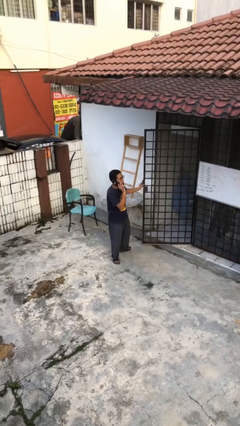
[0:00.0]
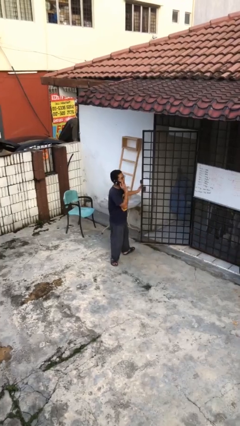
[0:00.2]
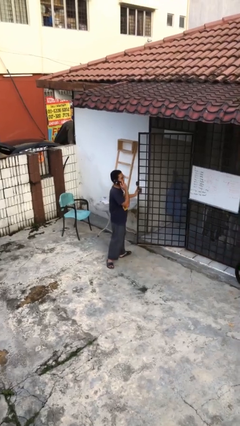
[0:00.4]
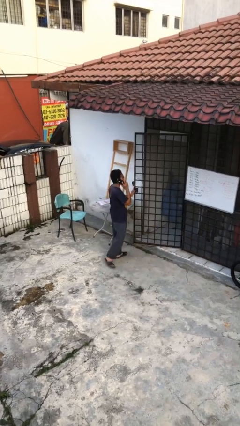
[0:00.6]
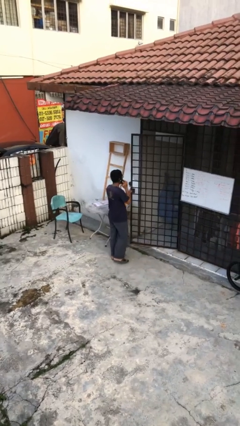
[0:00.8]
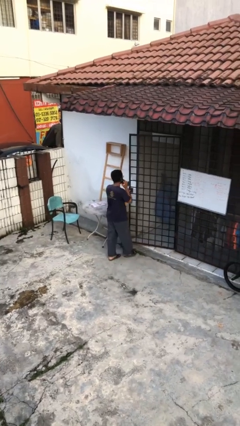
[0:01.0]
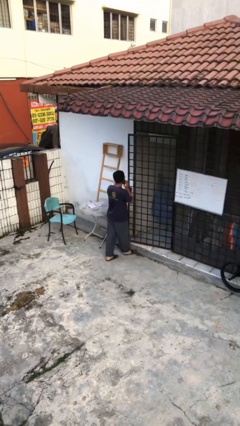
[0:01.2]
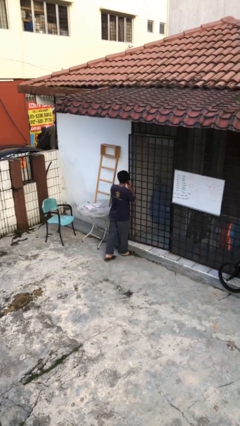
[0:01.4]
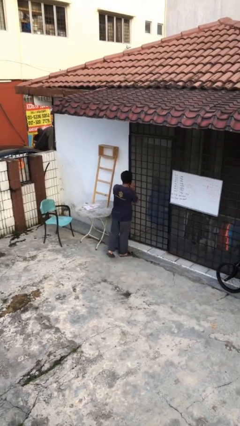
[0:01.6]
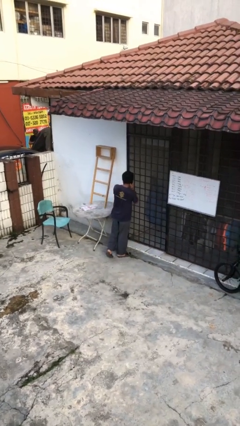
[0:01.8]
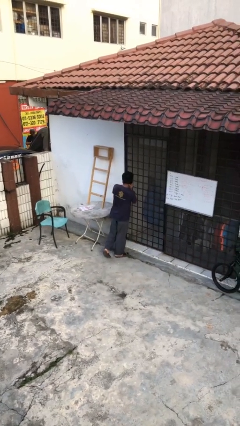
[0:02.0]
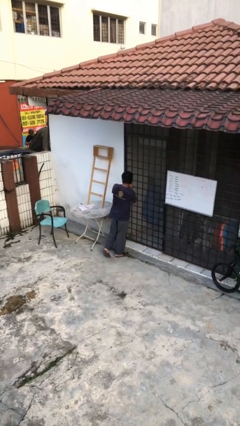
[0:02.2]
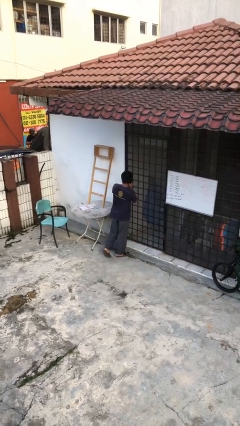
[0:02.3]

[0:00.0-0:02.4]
person closes facility door

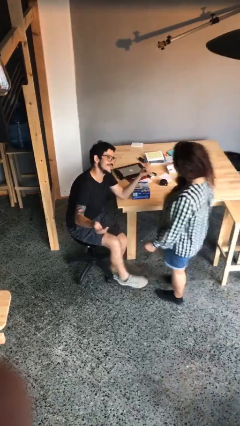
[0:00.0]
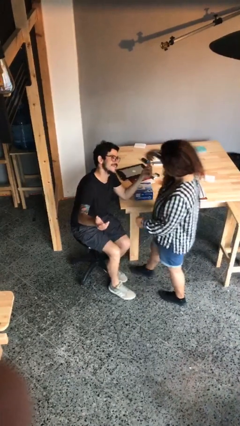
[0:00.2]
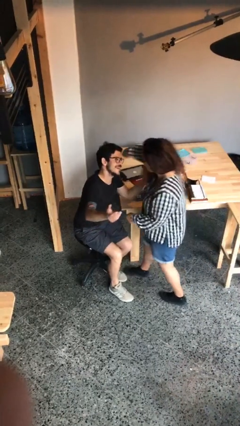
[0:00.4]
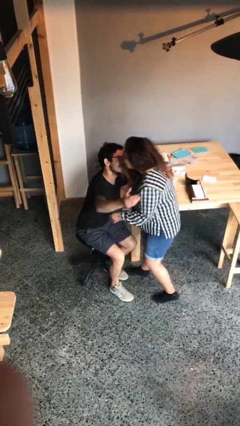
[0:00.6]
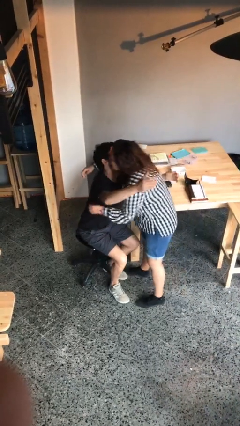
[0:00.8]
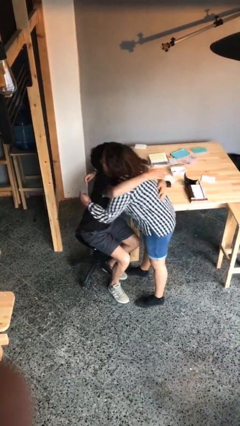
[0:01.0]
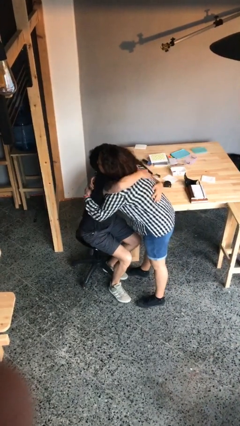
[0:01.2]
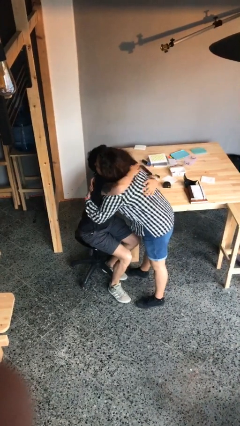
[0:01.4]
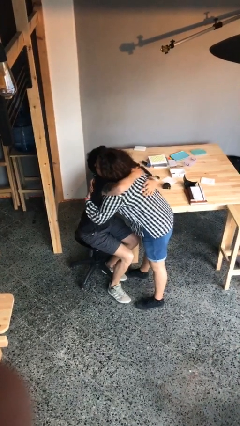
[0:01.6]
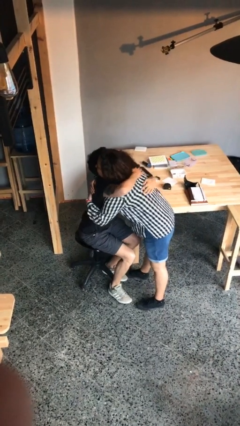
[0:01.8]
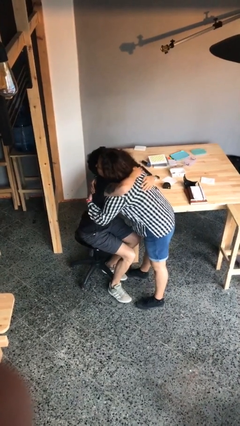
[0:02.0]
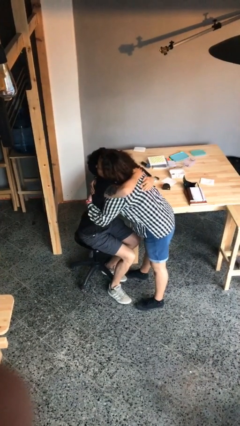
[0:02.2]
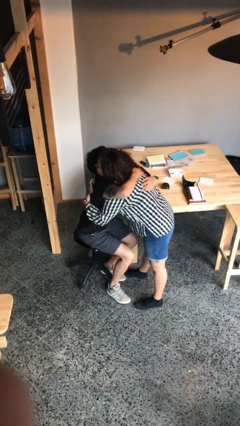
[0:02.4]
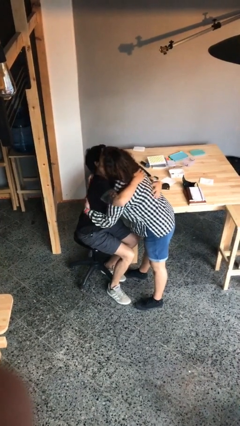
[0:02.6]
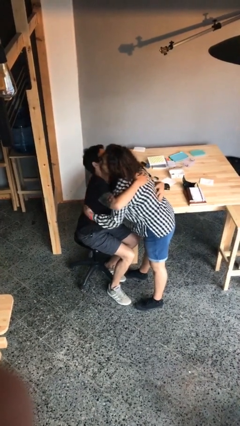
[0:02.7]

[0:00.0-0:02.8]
person embraces person

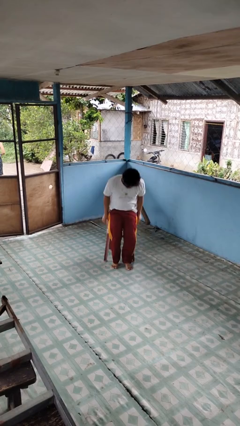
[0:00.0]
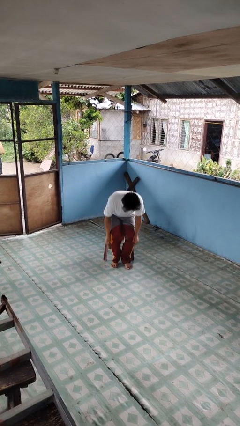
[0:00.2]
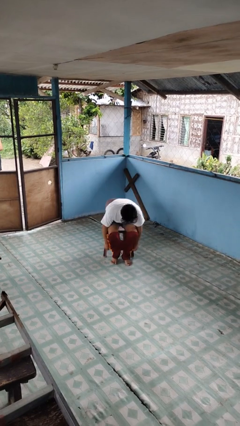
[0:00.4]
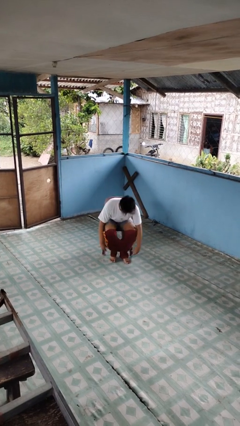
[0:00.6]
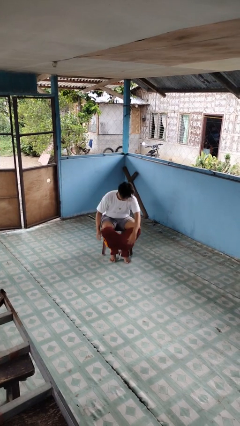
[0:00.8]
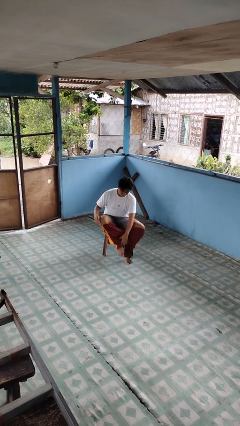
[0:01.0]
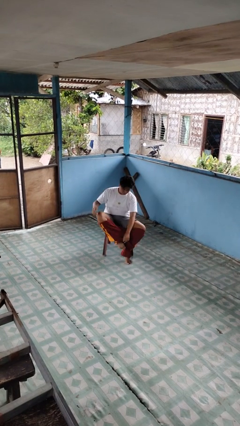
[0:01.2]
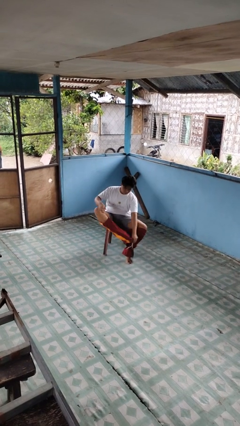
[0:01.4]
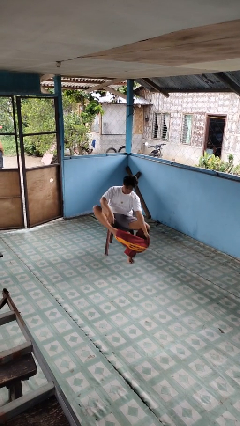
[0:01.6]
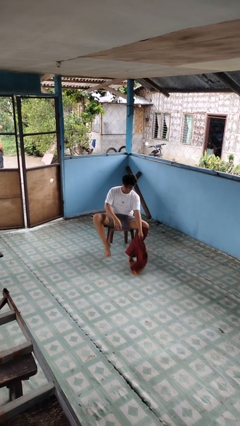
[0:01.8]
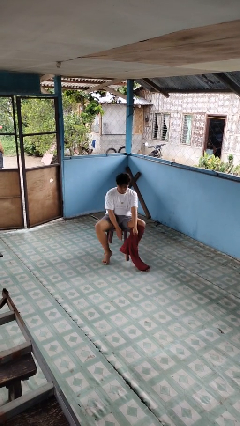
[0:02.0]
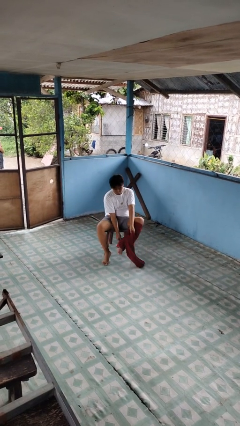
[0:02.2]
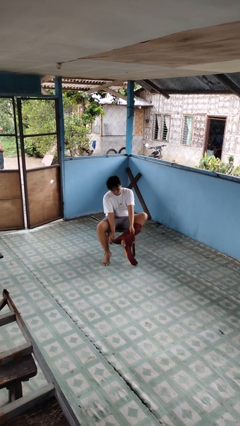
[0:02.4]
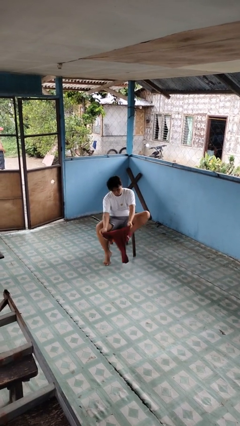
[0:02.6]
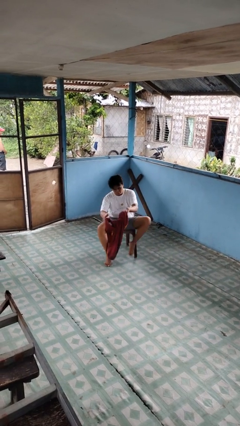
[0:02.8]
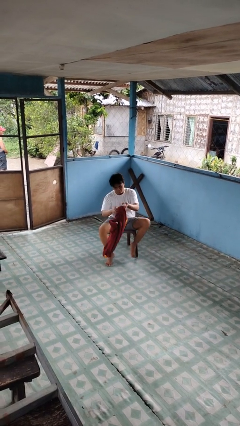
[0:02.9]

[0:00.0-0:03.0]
person takes off pants

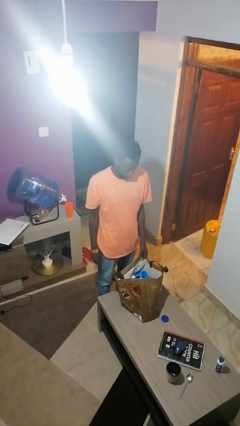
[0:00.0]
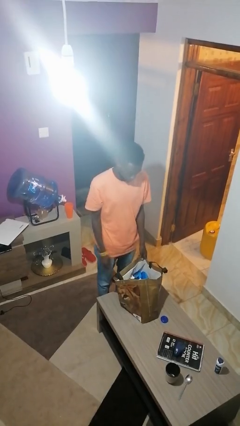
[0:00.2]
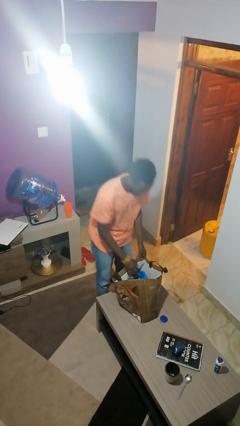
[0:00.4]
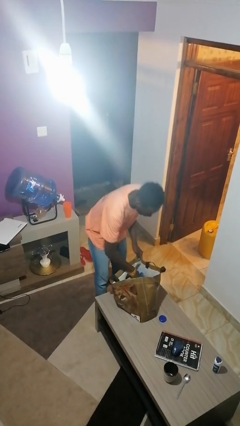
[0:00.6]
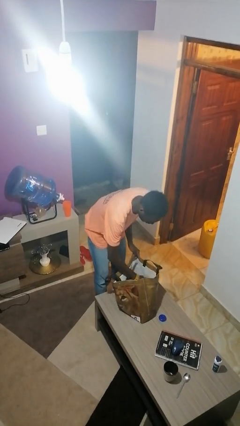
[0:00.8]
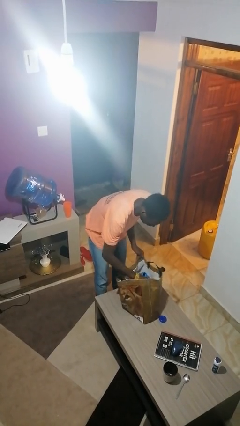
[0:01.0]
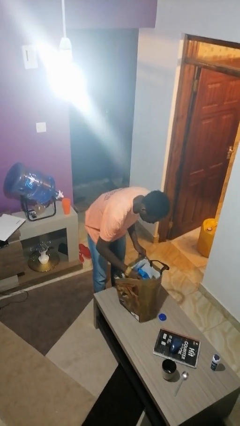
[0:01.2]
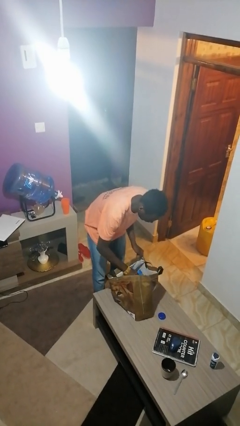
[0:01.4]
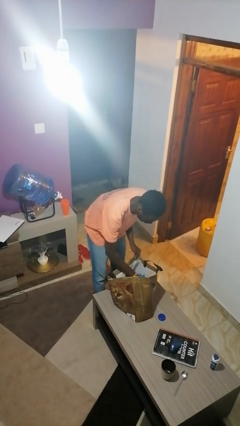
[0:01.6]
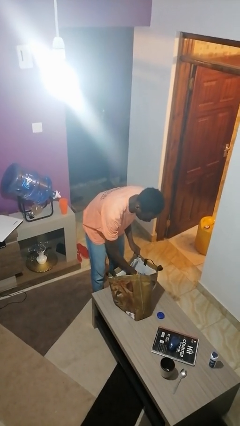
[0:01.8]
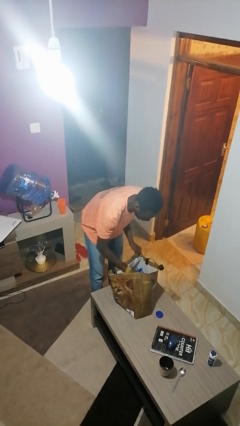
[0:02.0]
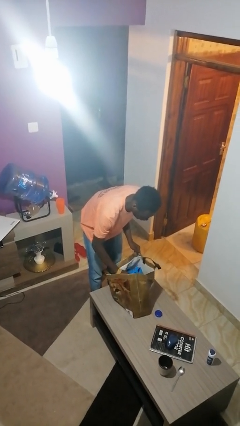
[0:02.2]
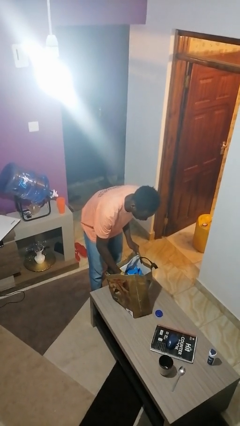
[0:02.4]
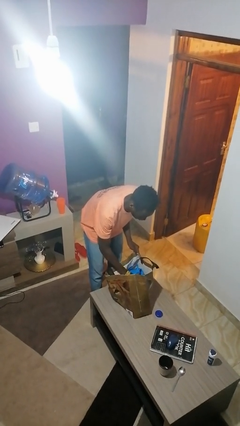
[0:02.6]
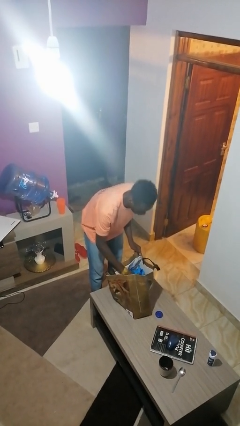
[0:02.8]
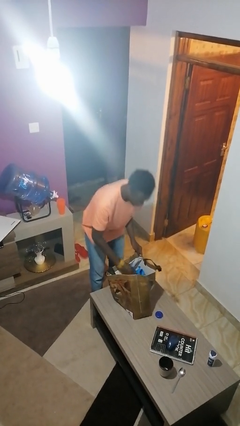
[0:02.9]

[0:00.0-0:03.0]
person searches in bag

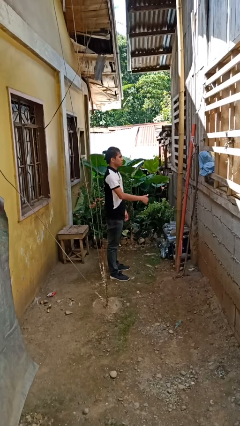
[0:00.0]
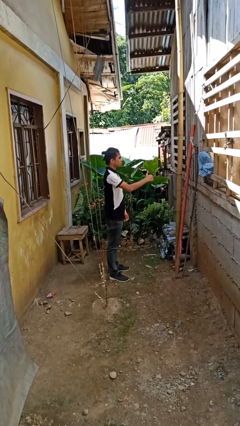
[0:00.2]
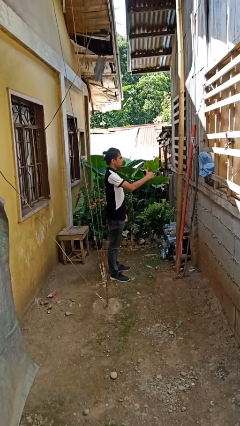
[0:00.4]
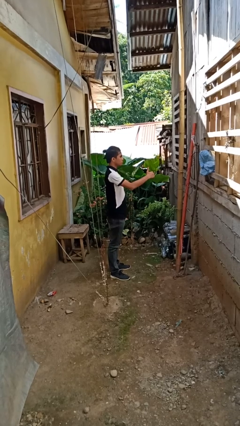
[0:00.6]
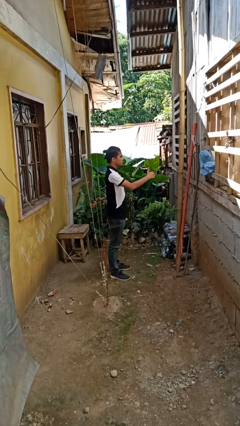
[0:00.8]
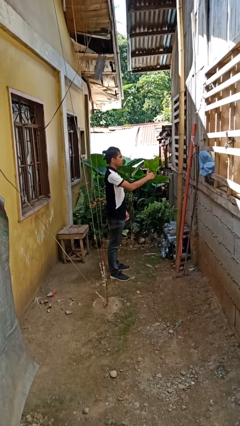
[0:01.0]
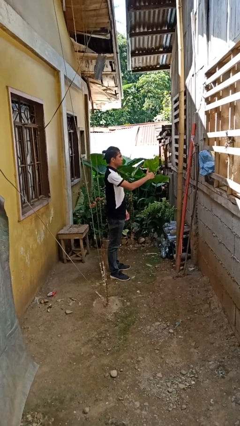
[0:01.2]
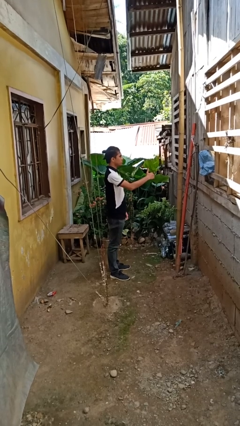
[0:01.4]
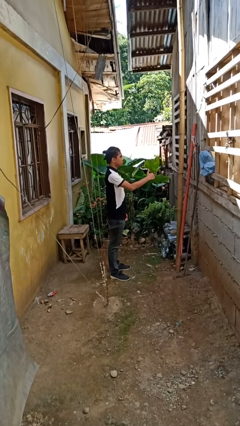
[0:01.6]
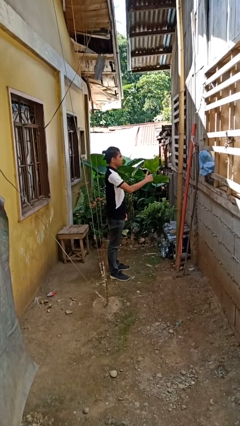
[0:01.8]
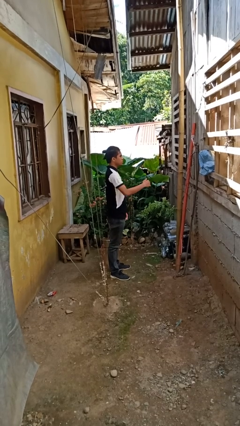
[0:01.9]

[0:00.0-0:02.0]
person gestures thumbs up

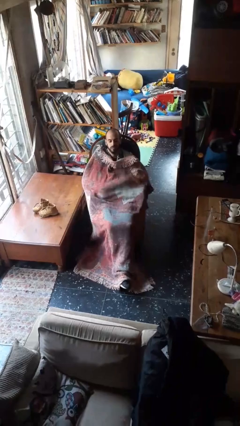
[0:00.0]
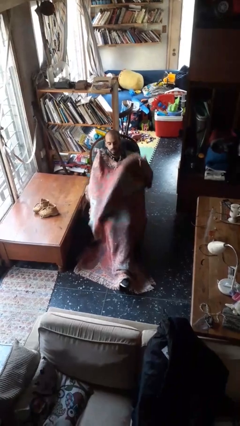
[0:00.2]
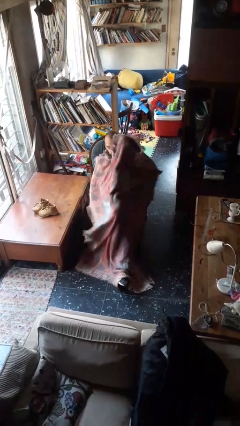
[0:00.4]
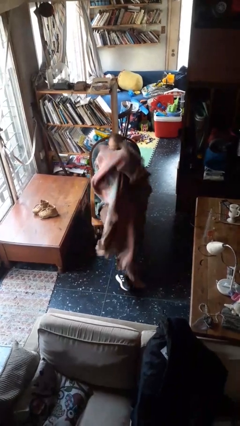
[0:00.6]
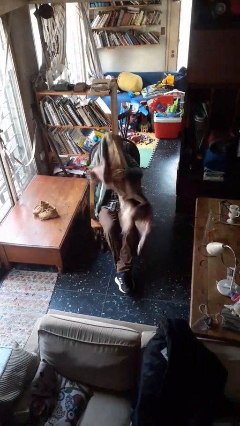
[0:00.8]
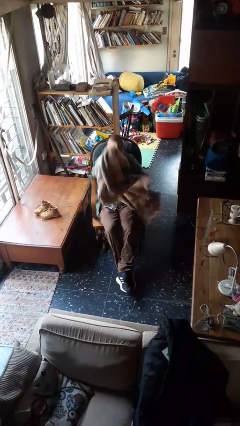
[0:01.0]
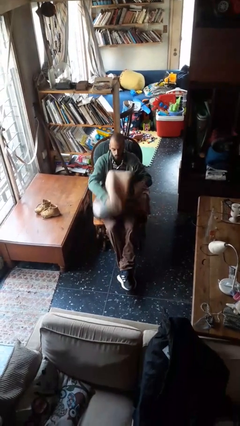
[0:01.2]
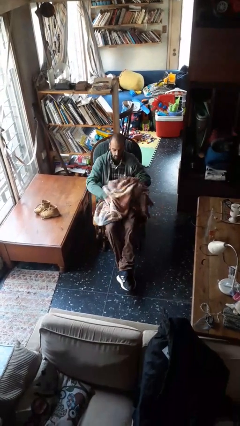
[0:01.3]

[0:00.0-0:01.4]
person uncovers with blanket

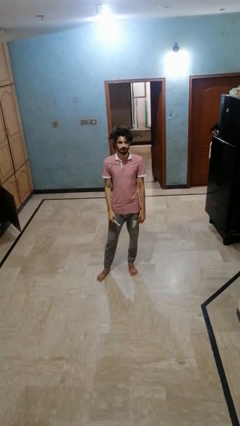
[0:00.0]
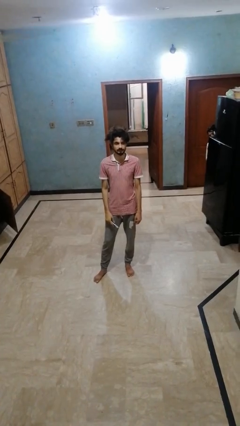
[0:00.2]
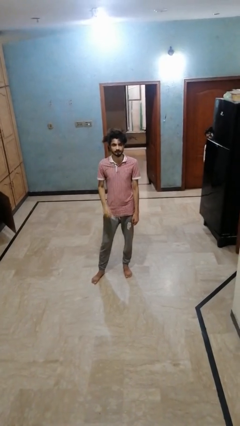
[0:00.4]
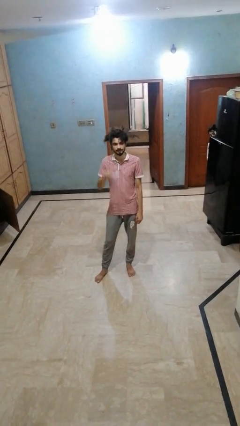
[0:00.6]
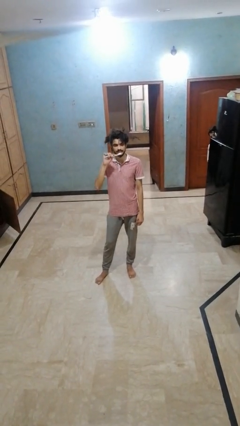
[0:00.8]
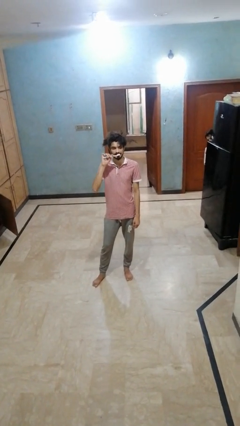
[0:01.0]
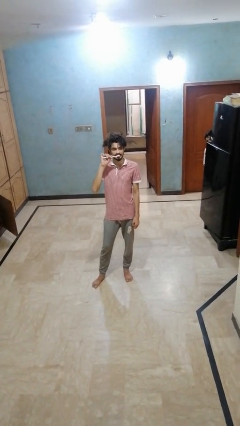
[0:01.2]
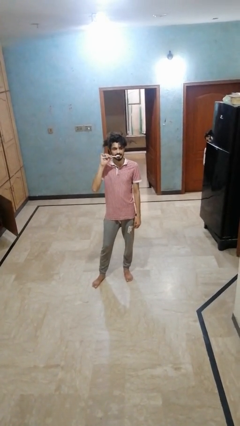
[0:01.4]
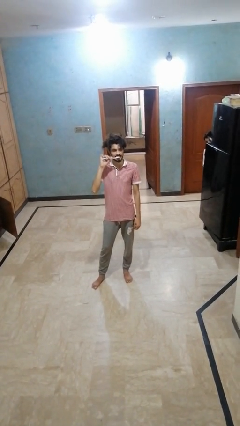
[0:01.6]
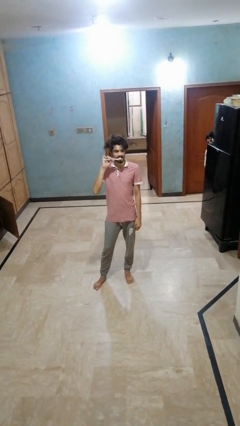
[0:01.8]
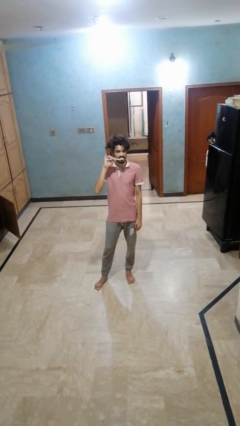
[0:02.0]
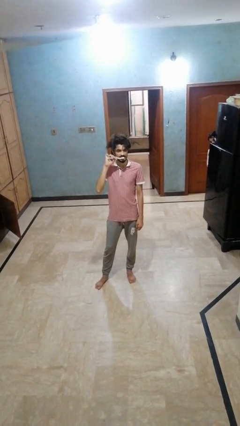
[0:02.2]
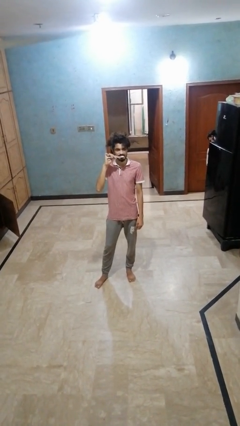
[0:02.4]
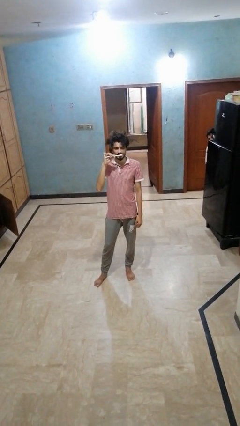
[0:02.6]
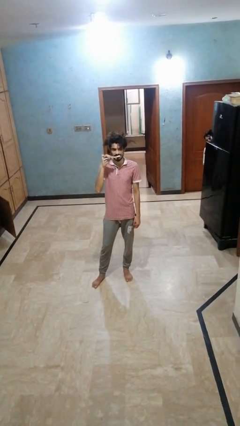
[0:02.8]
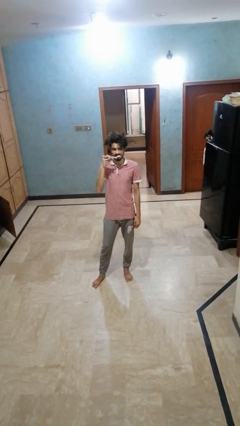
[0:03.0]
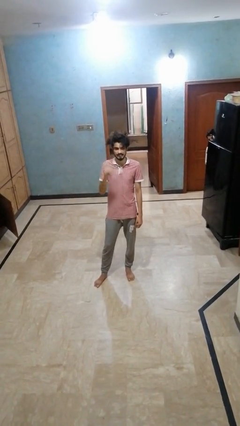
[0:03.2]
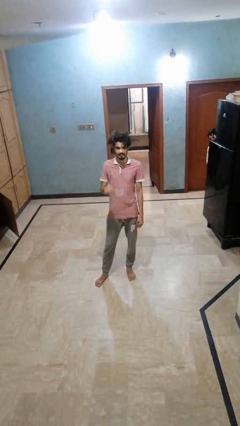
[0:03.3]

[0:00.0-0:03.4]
person brushes teeth
